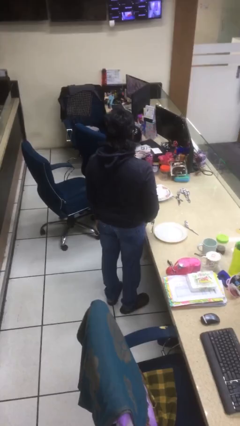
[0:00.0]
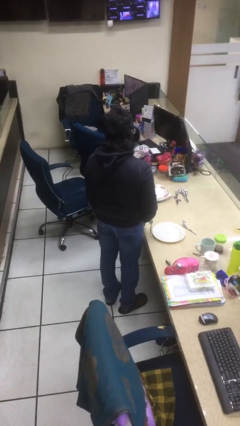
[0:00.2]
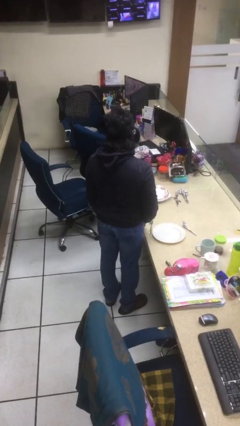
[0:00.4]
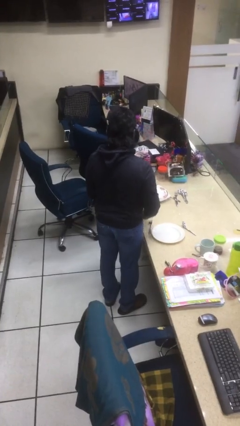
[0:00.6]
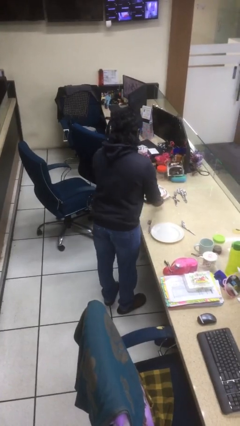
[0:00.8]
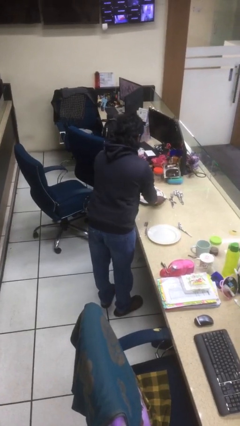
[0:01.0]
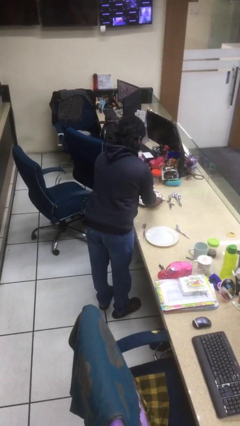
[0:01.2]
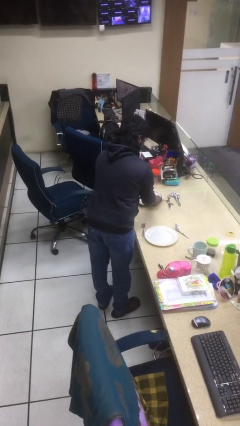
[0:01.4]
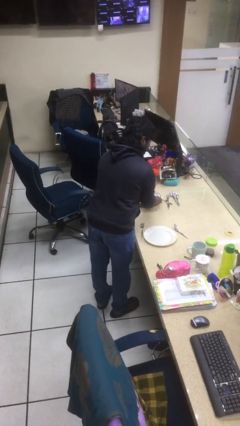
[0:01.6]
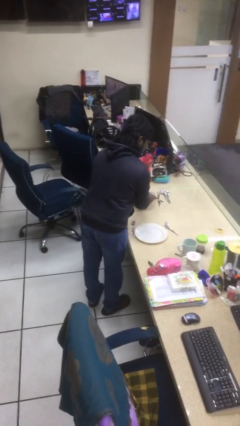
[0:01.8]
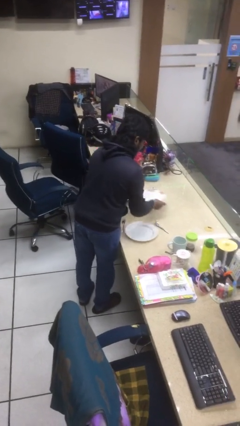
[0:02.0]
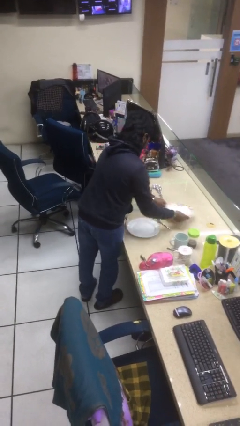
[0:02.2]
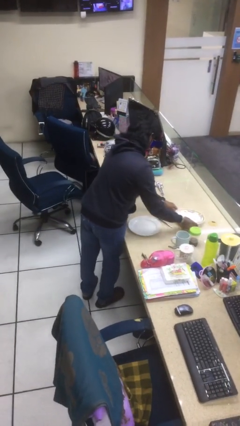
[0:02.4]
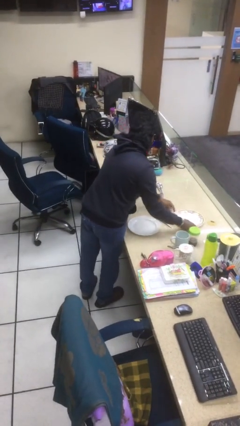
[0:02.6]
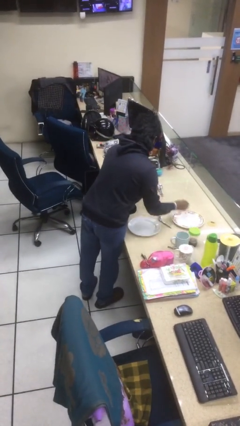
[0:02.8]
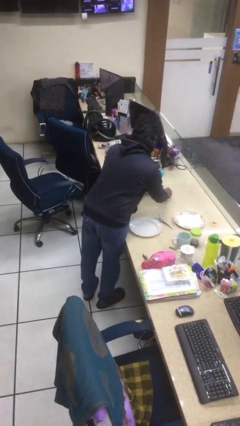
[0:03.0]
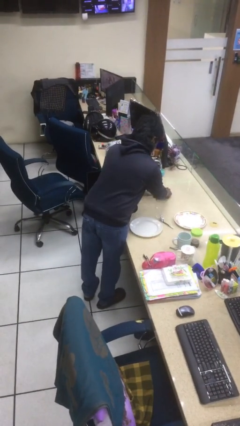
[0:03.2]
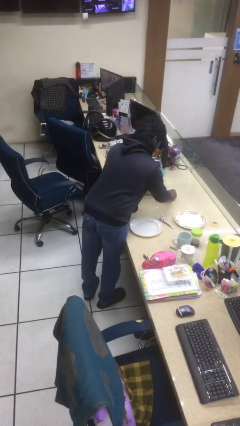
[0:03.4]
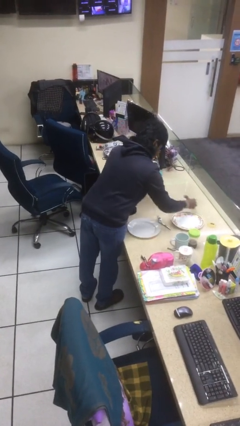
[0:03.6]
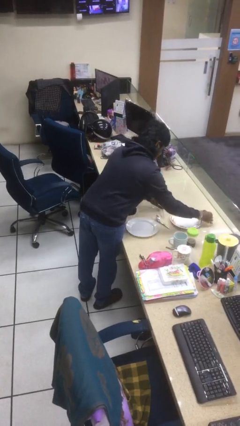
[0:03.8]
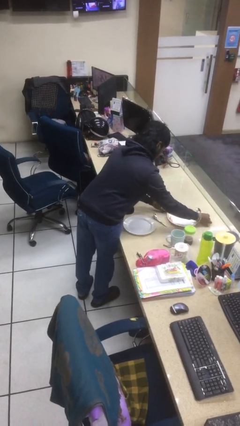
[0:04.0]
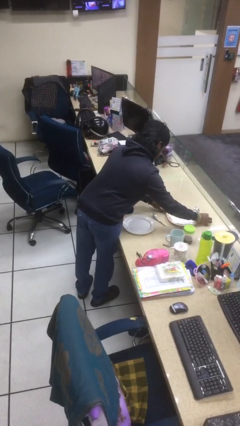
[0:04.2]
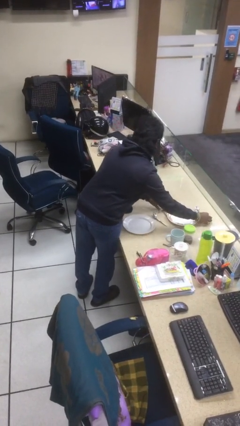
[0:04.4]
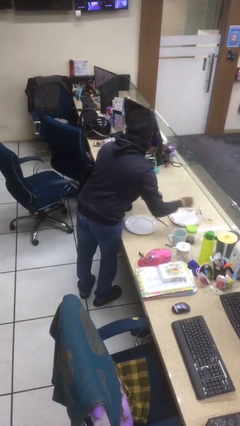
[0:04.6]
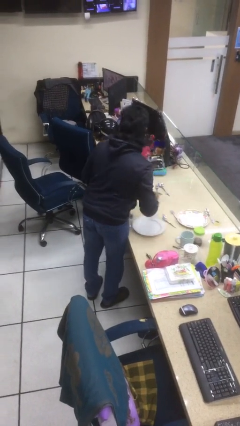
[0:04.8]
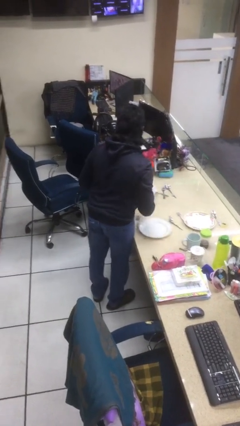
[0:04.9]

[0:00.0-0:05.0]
person sets table

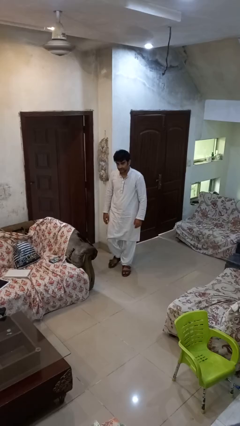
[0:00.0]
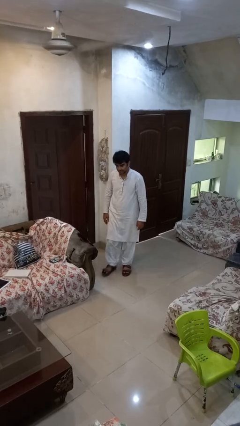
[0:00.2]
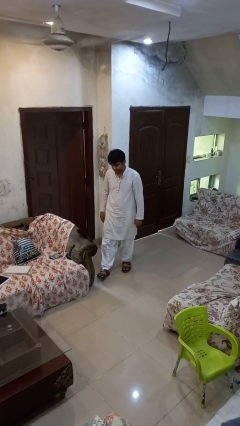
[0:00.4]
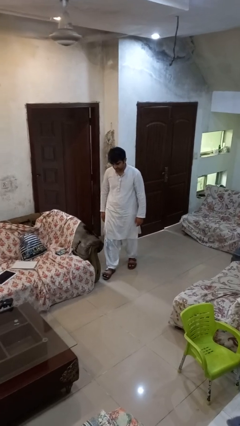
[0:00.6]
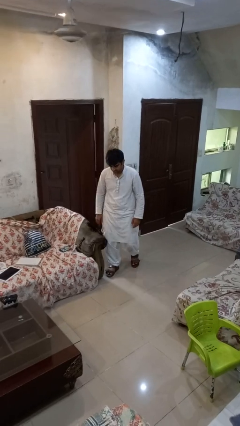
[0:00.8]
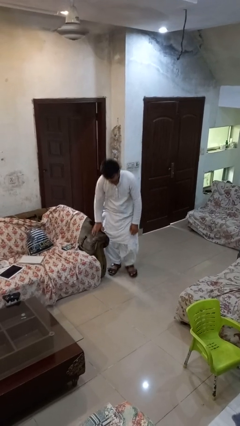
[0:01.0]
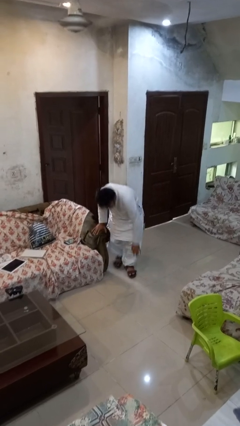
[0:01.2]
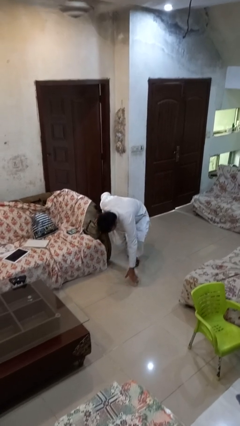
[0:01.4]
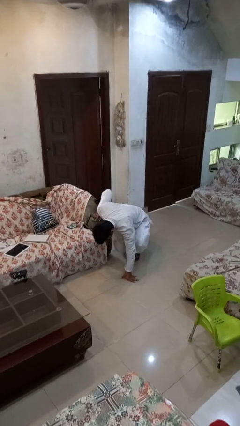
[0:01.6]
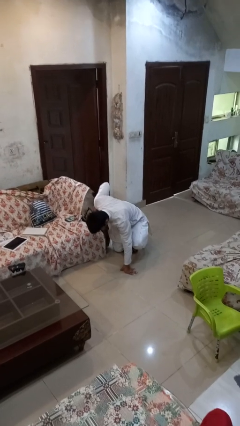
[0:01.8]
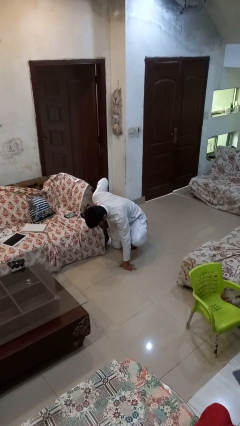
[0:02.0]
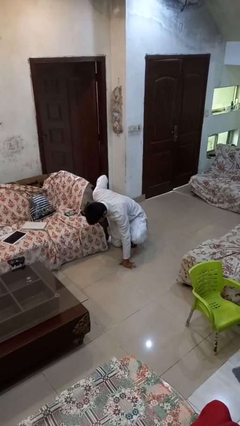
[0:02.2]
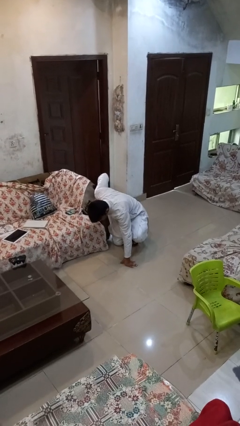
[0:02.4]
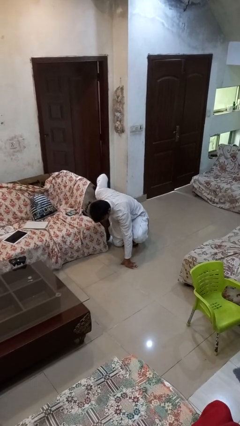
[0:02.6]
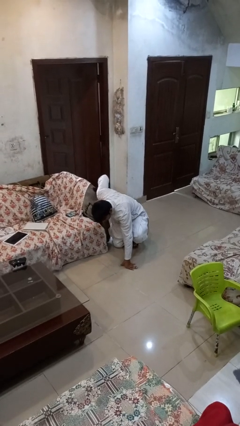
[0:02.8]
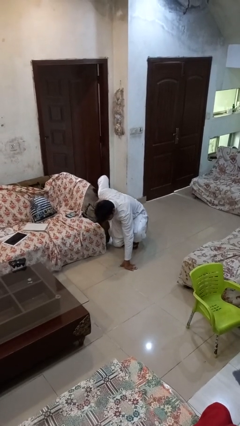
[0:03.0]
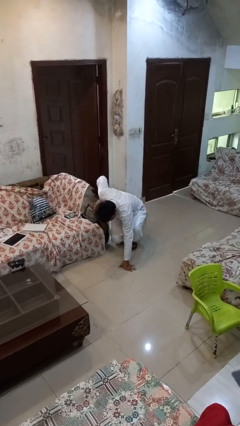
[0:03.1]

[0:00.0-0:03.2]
person trips on object on floor

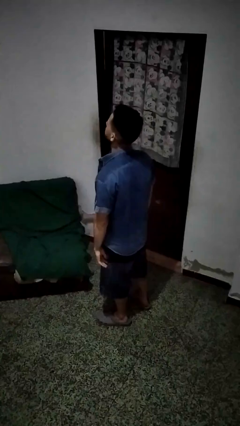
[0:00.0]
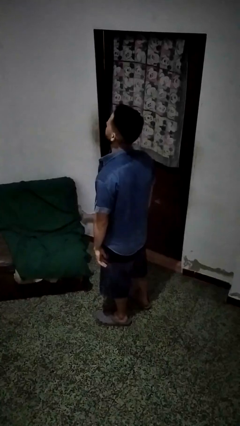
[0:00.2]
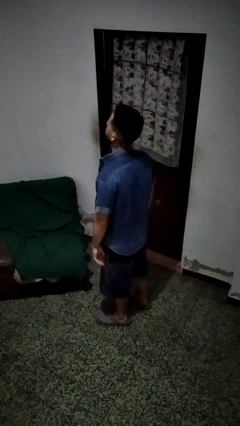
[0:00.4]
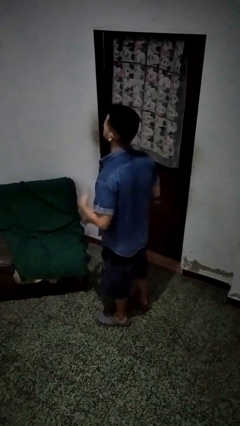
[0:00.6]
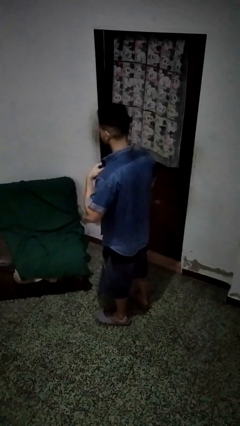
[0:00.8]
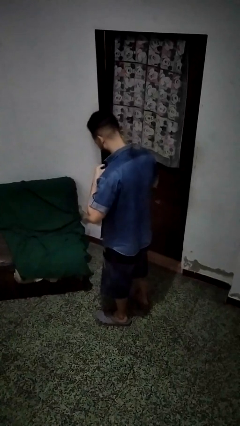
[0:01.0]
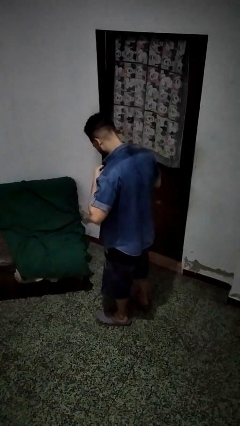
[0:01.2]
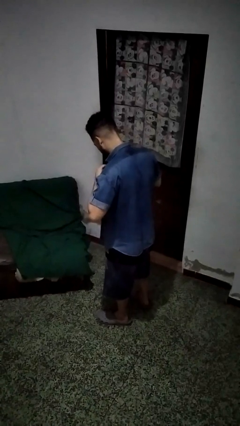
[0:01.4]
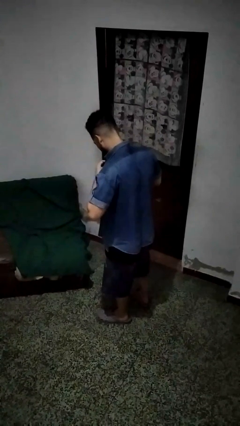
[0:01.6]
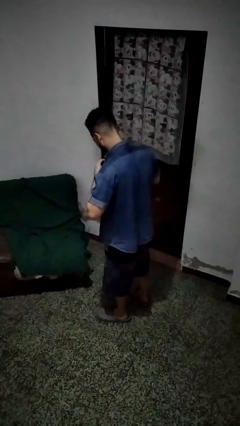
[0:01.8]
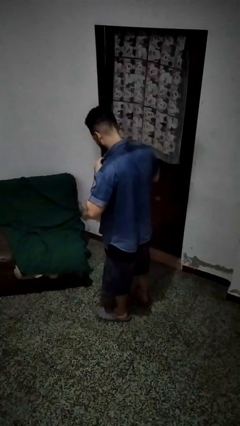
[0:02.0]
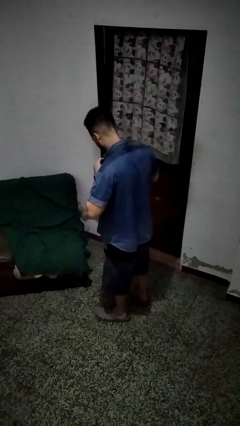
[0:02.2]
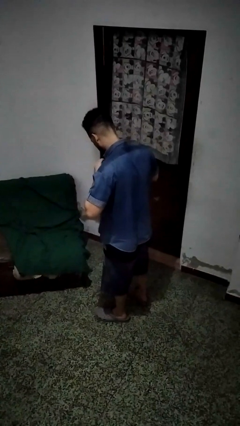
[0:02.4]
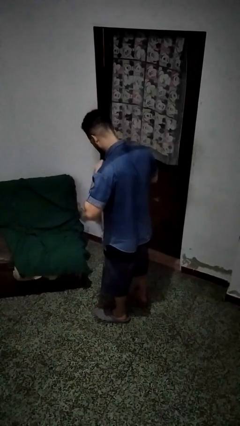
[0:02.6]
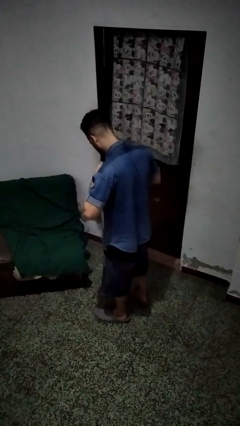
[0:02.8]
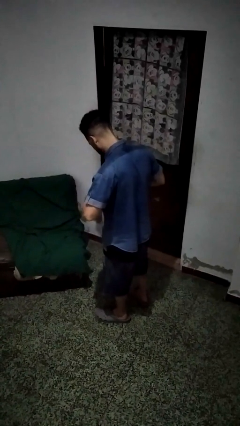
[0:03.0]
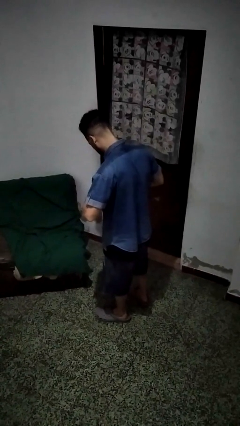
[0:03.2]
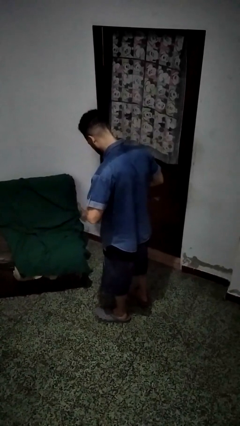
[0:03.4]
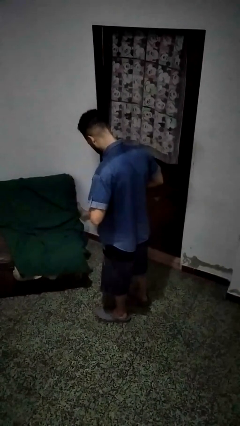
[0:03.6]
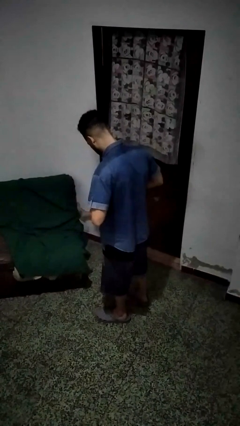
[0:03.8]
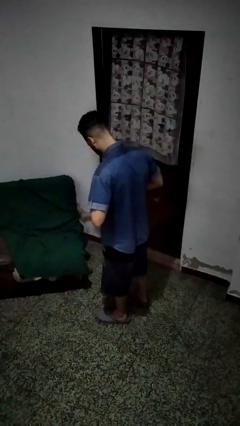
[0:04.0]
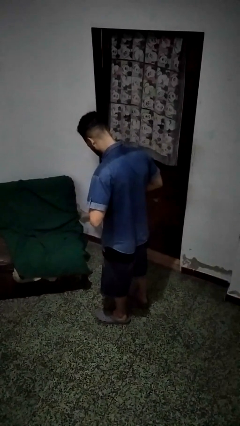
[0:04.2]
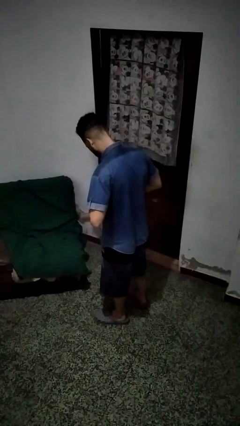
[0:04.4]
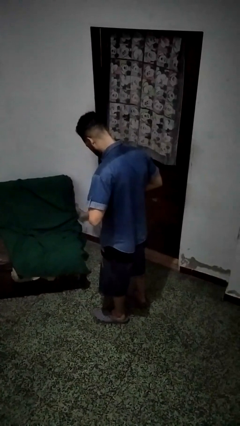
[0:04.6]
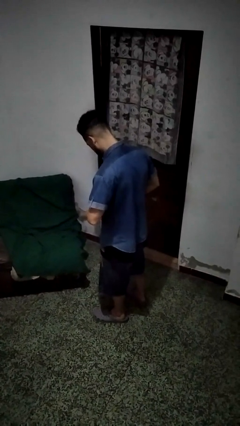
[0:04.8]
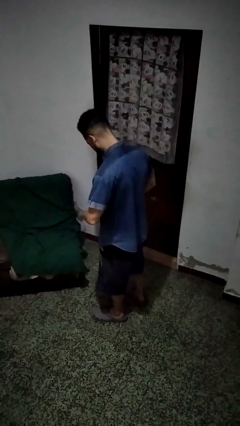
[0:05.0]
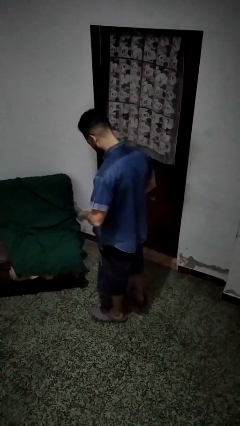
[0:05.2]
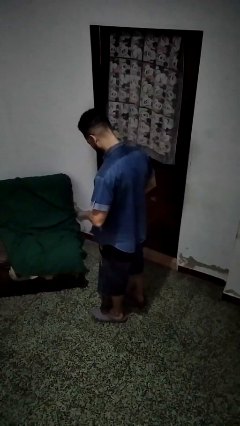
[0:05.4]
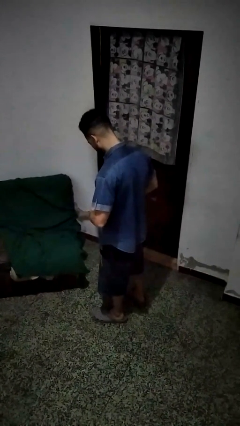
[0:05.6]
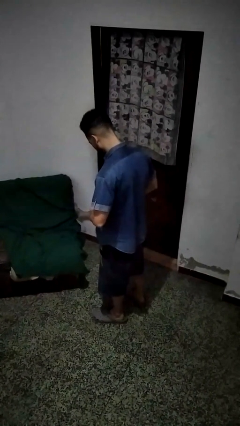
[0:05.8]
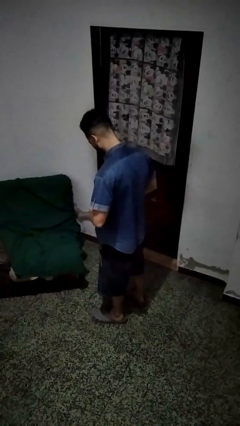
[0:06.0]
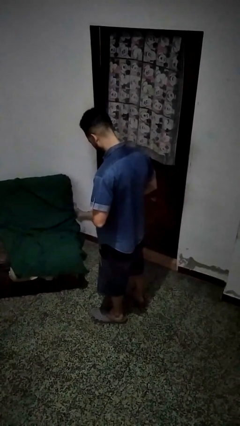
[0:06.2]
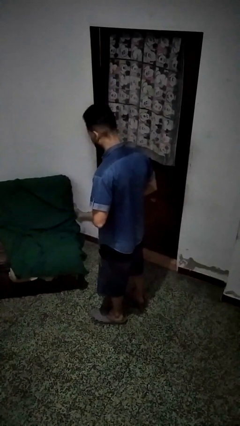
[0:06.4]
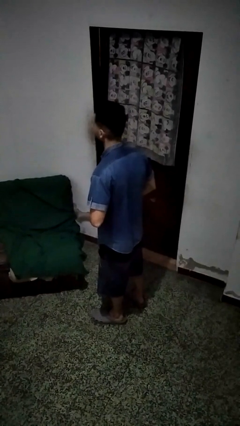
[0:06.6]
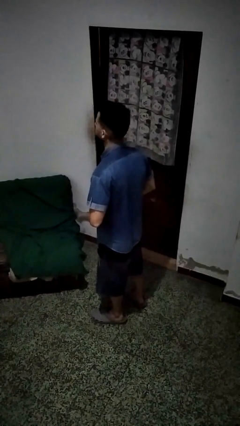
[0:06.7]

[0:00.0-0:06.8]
person buttons shirt

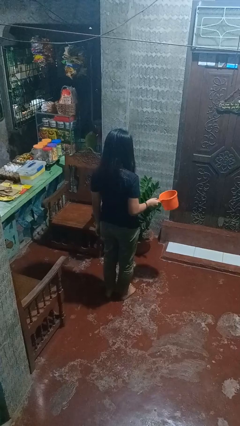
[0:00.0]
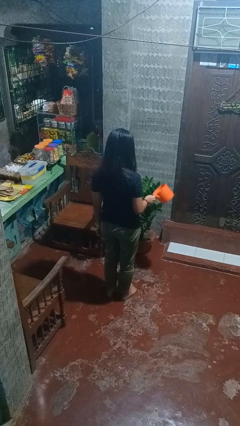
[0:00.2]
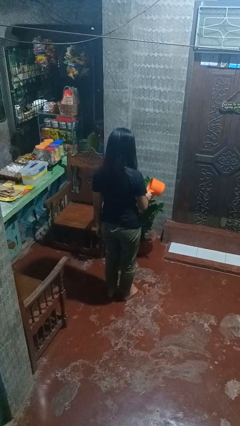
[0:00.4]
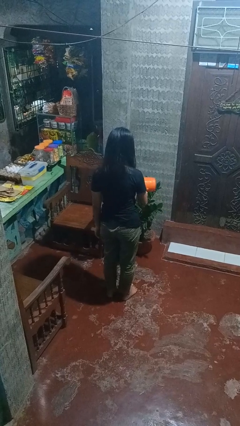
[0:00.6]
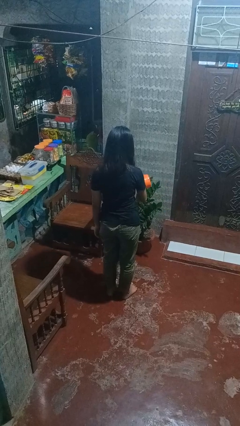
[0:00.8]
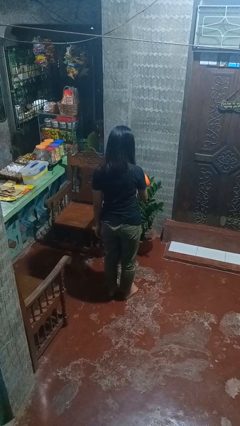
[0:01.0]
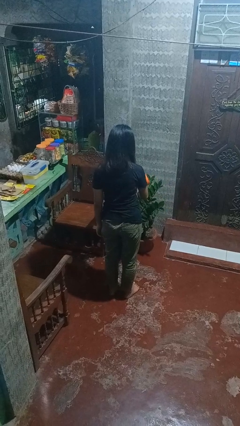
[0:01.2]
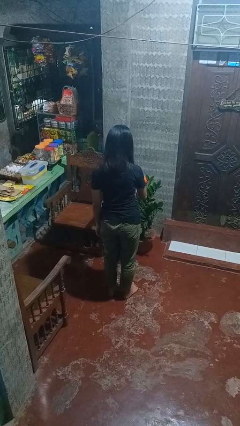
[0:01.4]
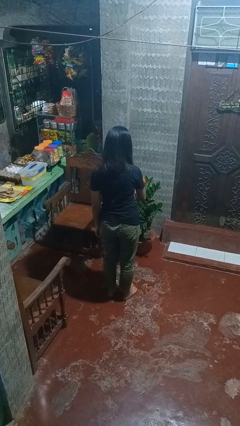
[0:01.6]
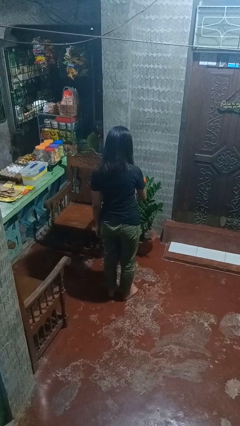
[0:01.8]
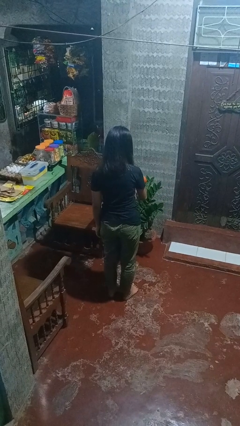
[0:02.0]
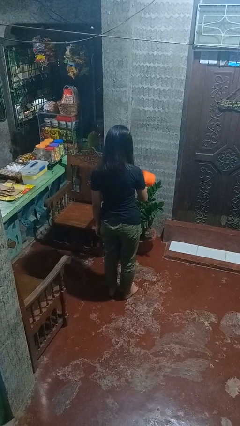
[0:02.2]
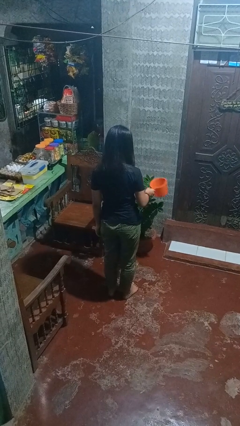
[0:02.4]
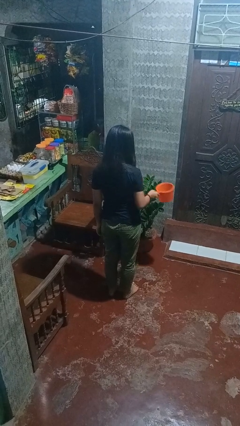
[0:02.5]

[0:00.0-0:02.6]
person waters houseplant

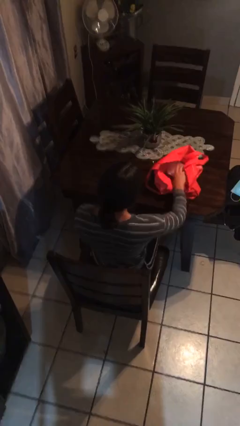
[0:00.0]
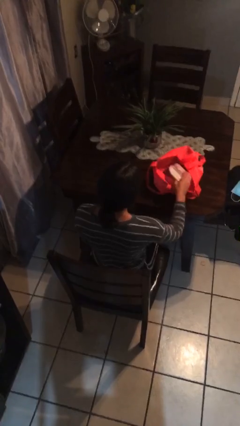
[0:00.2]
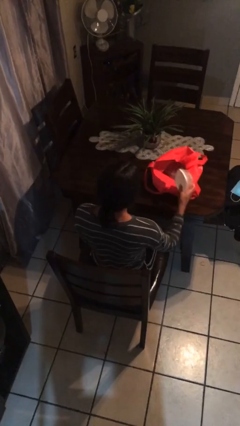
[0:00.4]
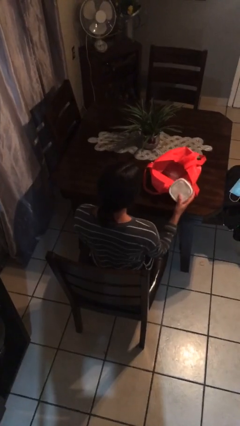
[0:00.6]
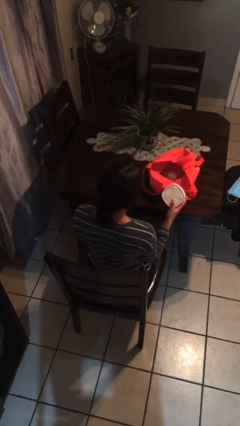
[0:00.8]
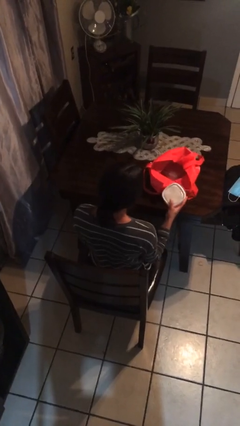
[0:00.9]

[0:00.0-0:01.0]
person takes object from bag
